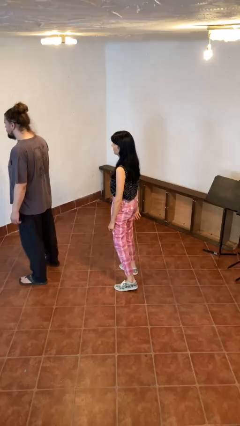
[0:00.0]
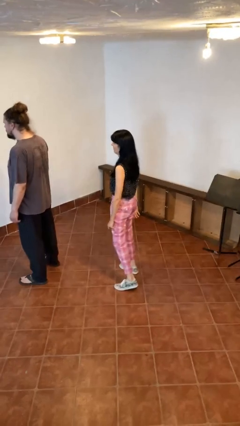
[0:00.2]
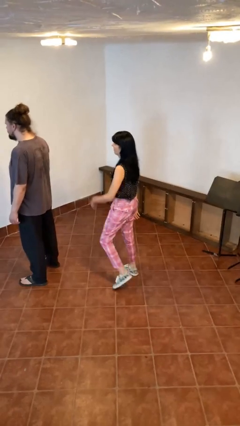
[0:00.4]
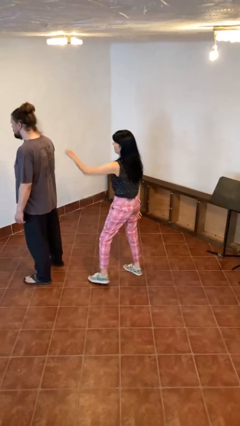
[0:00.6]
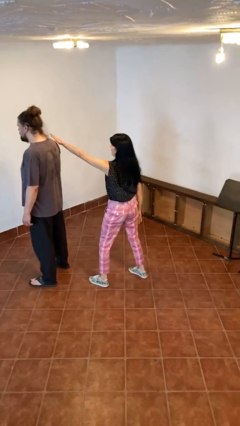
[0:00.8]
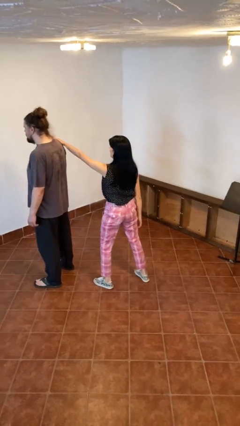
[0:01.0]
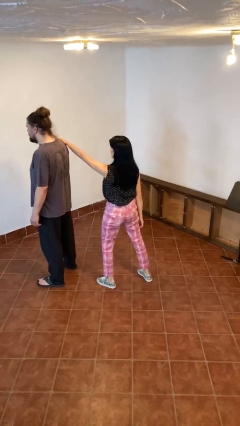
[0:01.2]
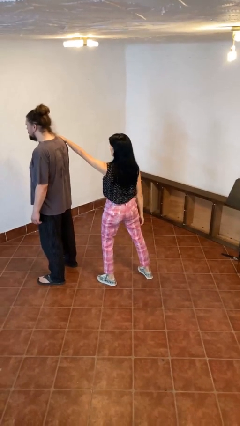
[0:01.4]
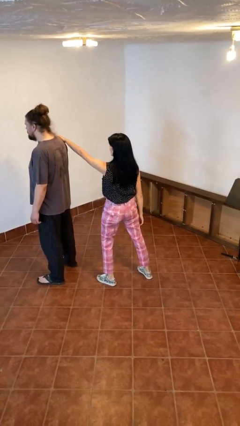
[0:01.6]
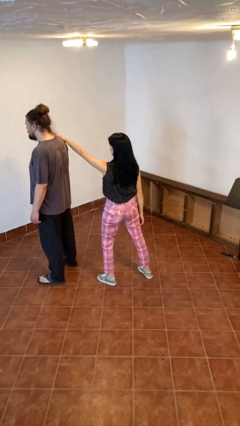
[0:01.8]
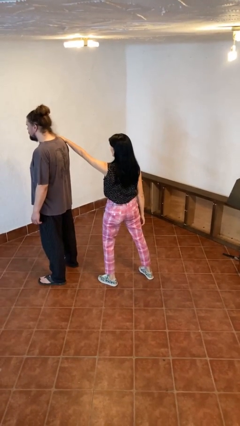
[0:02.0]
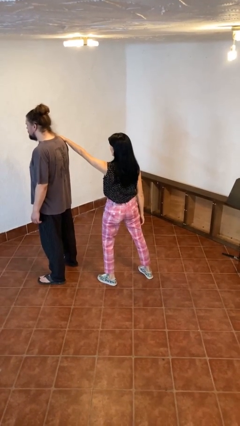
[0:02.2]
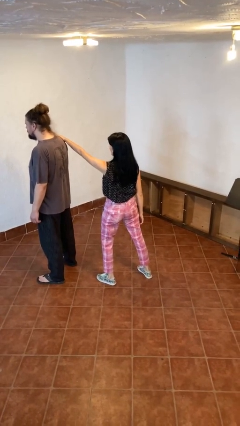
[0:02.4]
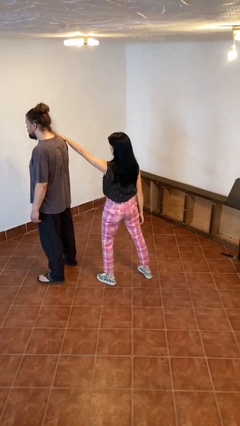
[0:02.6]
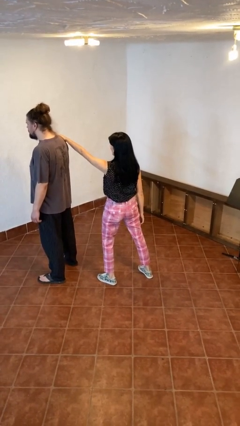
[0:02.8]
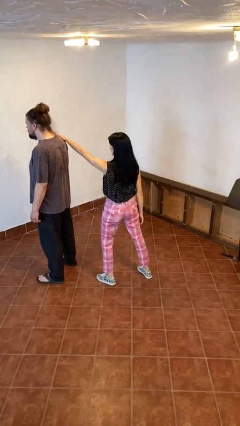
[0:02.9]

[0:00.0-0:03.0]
person grabs person by shoulder

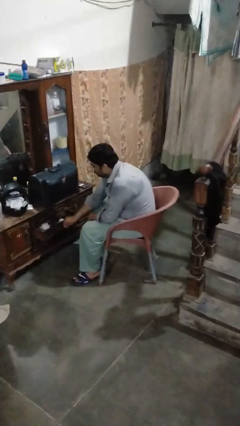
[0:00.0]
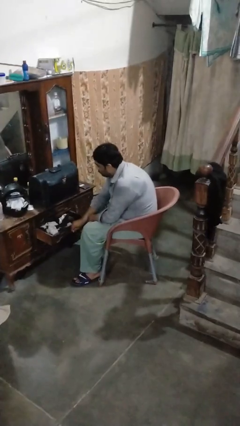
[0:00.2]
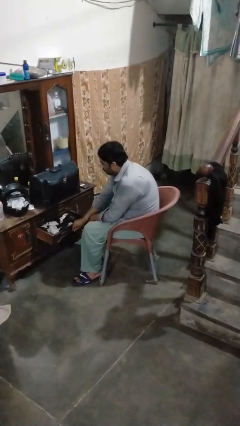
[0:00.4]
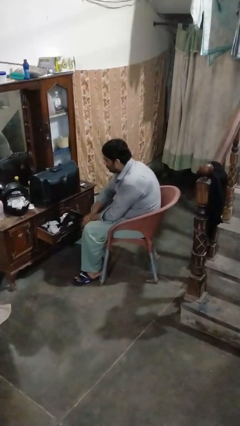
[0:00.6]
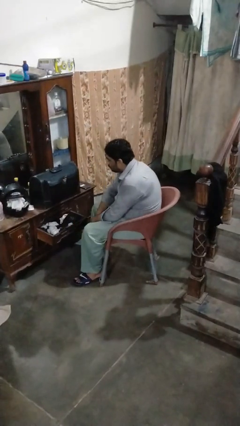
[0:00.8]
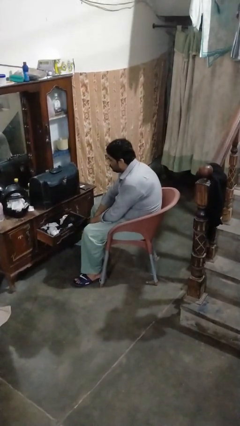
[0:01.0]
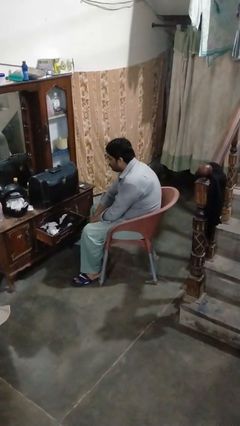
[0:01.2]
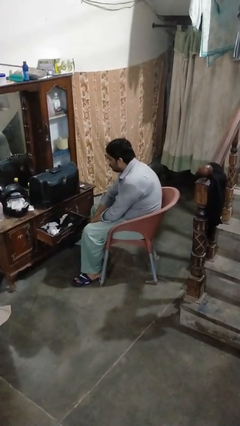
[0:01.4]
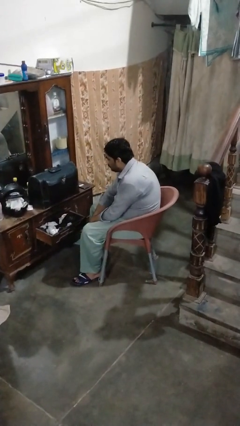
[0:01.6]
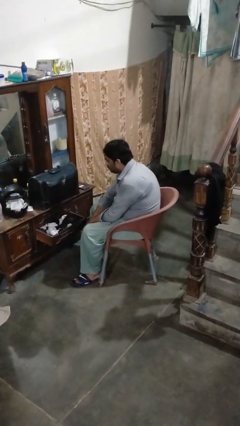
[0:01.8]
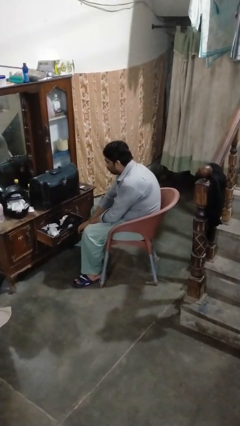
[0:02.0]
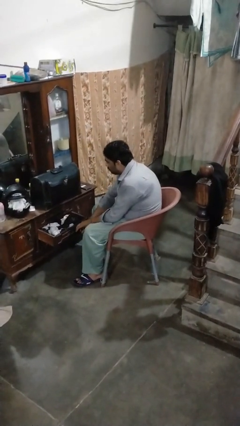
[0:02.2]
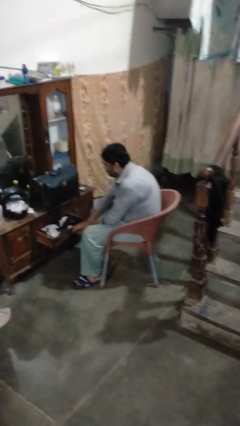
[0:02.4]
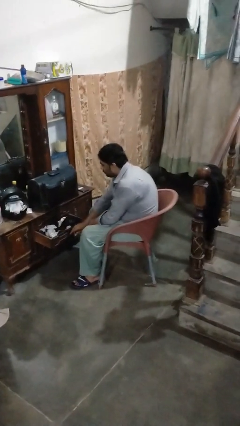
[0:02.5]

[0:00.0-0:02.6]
person opens dresser drawer

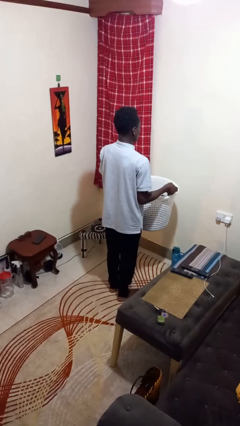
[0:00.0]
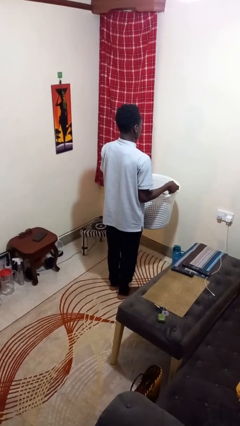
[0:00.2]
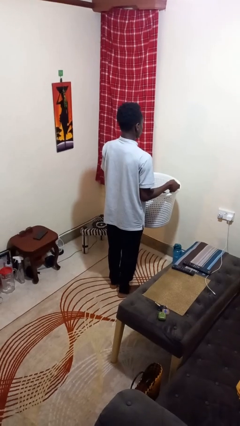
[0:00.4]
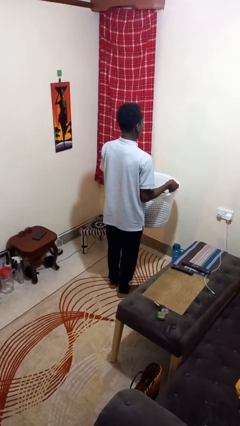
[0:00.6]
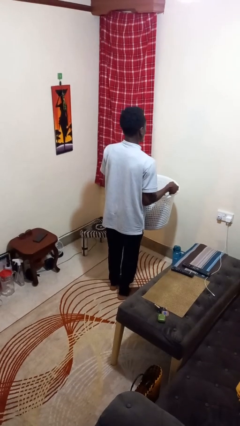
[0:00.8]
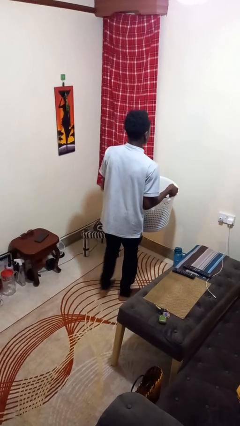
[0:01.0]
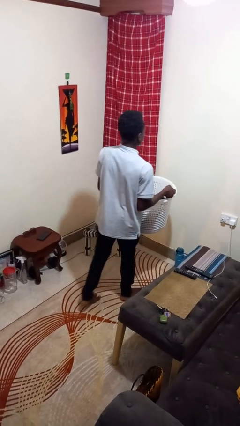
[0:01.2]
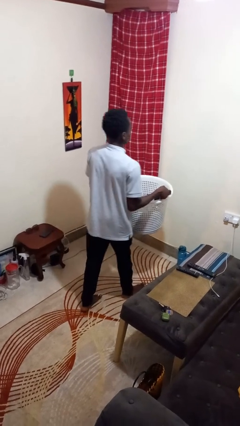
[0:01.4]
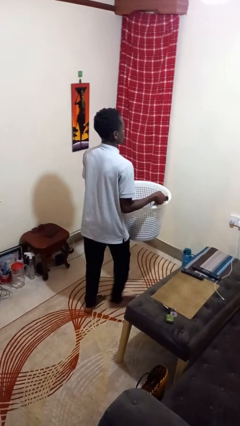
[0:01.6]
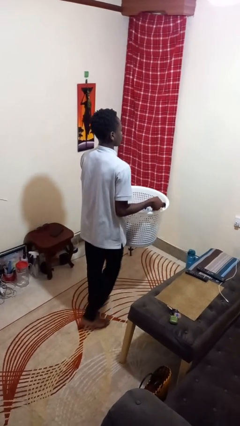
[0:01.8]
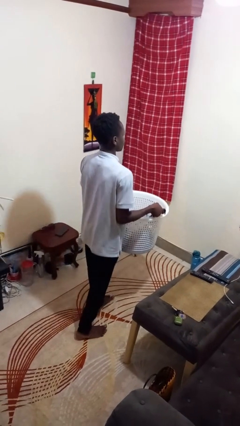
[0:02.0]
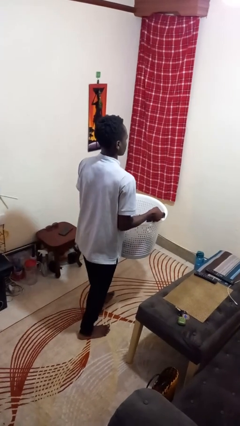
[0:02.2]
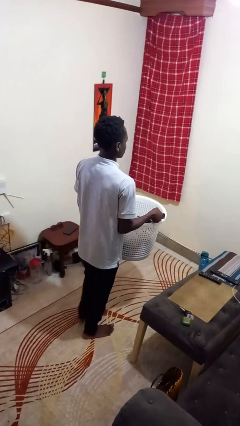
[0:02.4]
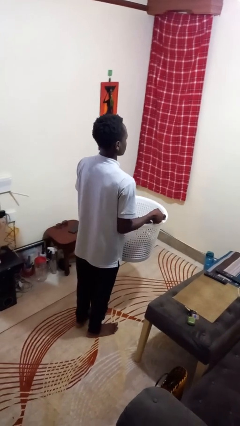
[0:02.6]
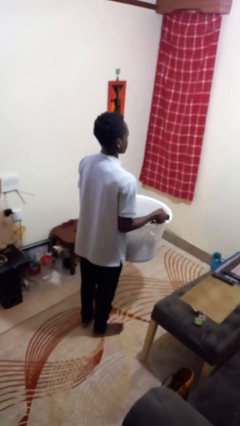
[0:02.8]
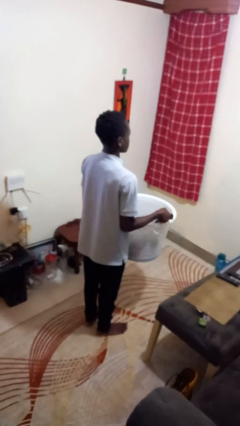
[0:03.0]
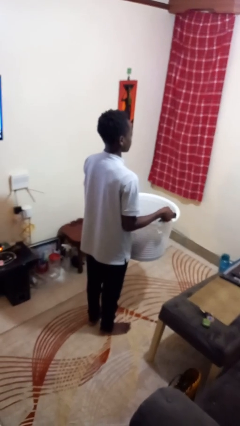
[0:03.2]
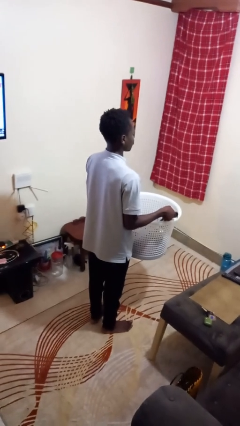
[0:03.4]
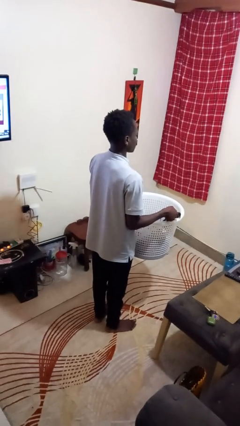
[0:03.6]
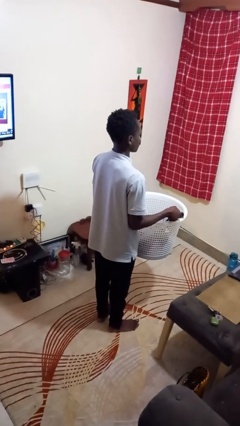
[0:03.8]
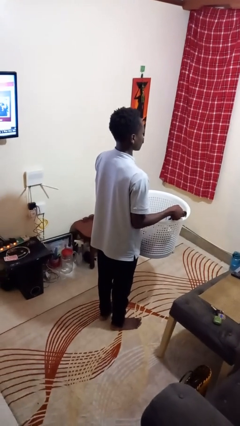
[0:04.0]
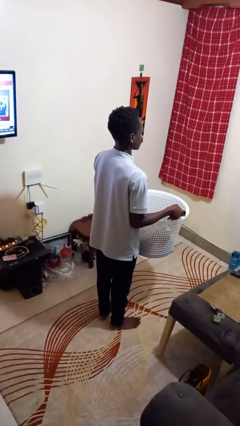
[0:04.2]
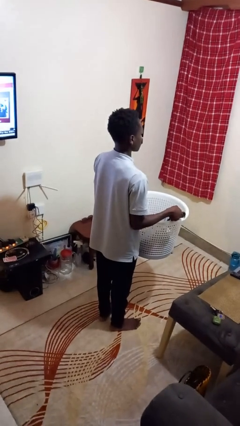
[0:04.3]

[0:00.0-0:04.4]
person carries laundry basket

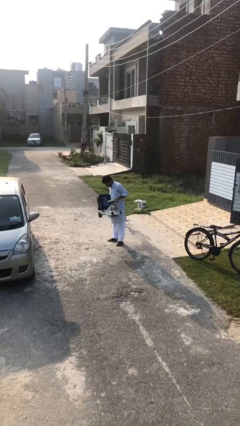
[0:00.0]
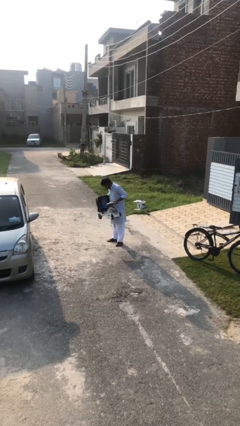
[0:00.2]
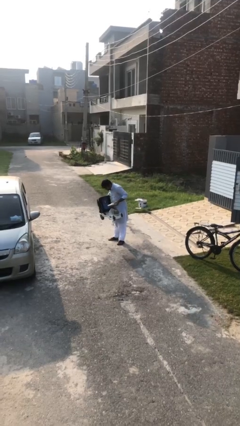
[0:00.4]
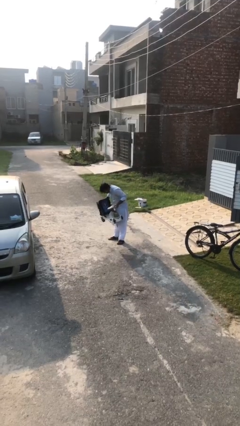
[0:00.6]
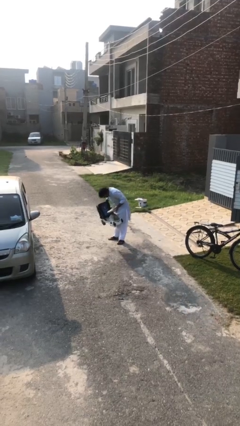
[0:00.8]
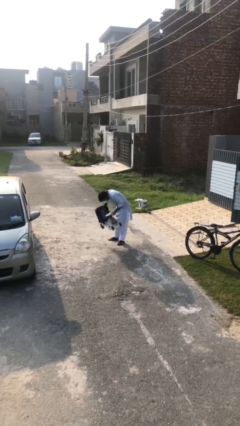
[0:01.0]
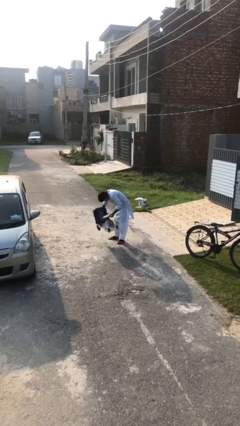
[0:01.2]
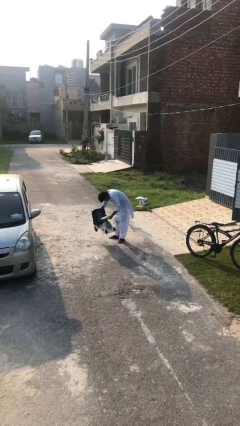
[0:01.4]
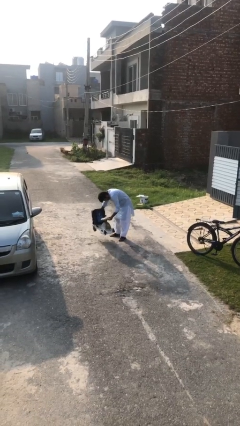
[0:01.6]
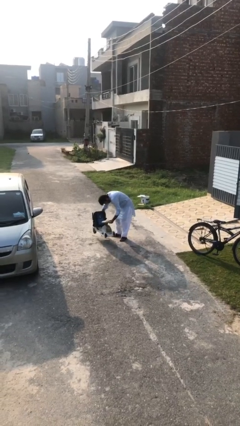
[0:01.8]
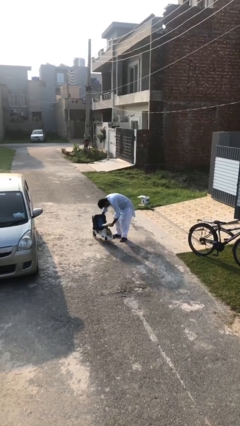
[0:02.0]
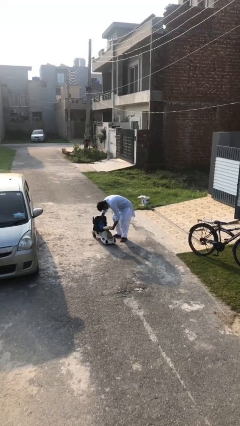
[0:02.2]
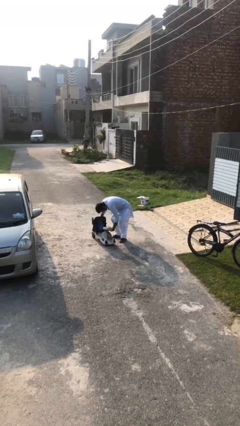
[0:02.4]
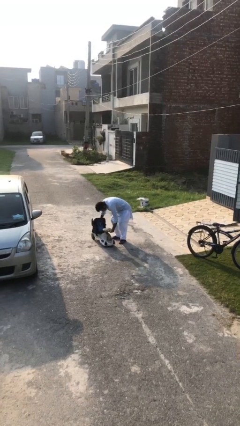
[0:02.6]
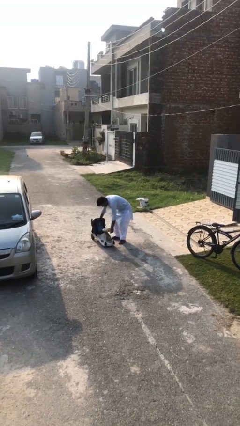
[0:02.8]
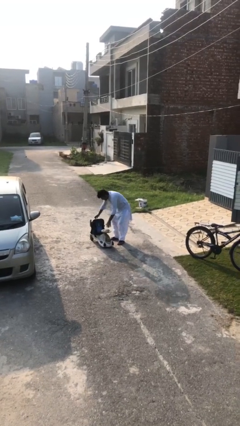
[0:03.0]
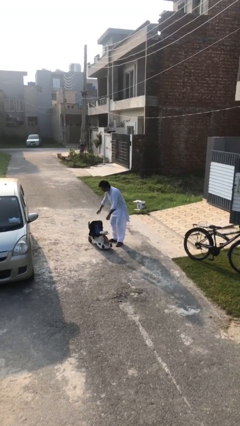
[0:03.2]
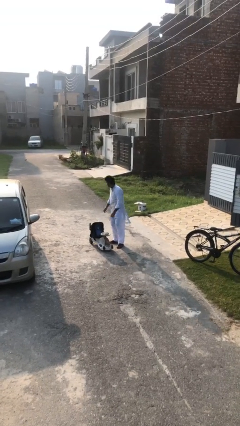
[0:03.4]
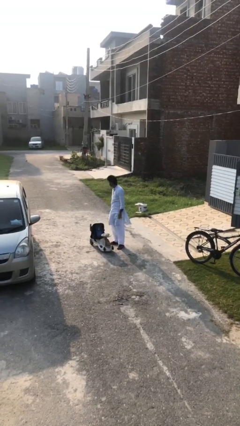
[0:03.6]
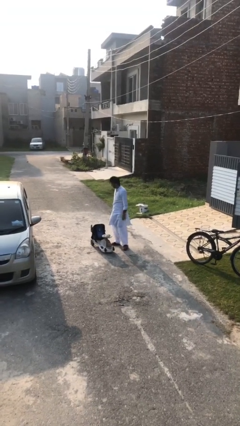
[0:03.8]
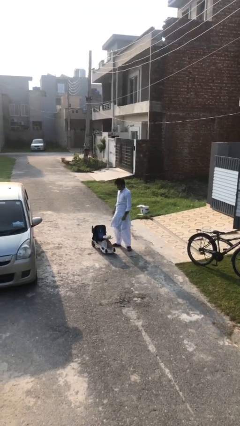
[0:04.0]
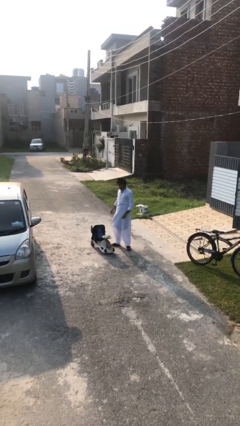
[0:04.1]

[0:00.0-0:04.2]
person puts down object on floor

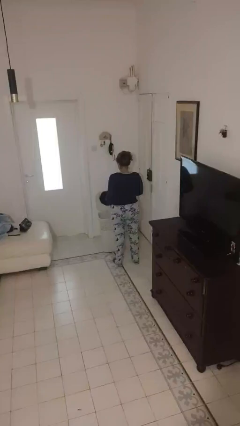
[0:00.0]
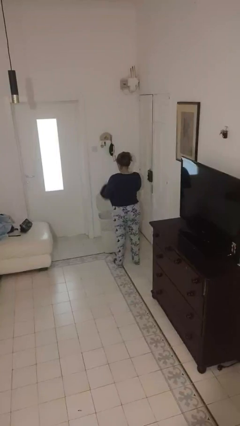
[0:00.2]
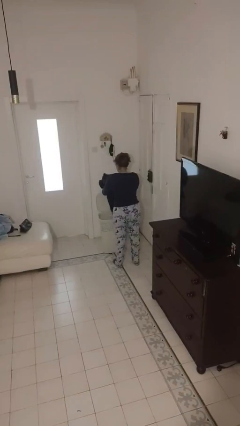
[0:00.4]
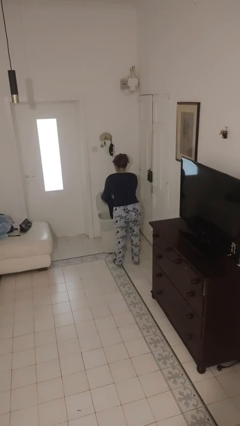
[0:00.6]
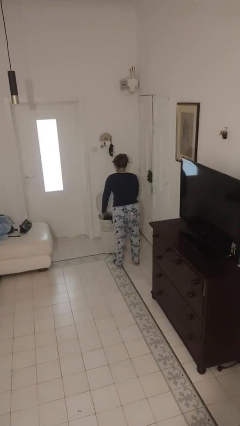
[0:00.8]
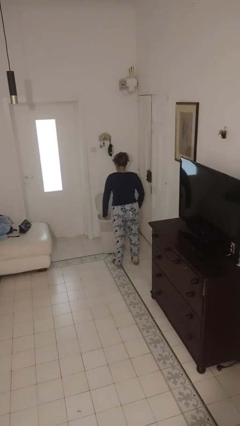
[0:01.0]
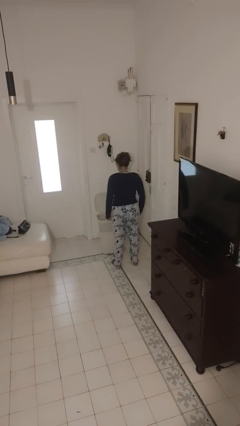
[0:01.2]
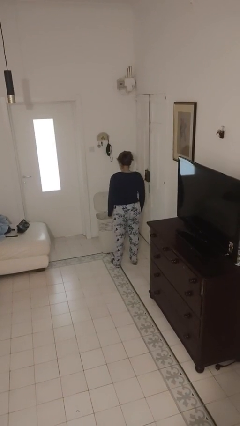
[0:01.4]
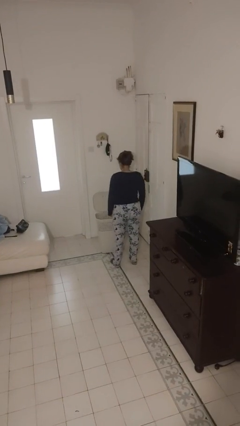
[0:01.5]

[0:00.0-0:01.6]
person puts object into basket

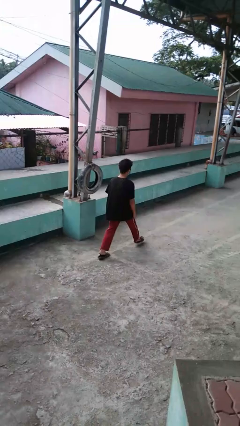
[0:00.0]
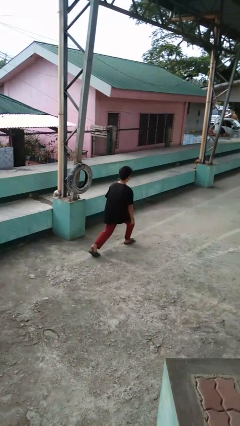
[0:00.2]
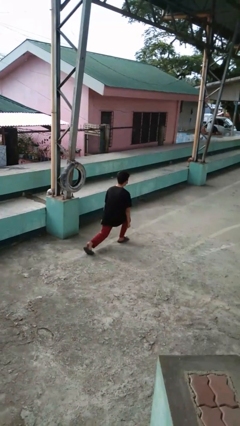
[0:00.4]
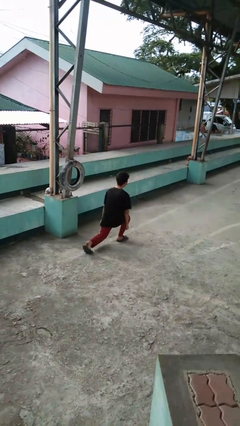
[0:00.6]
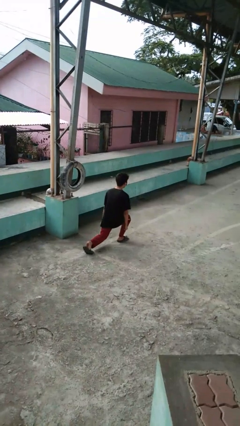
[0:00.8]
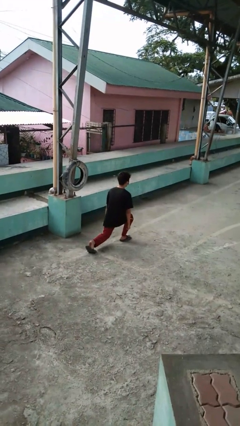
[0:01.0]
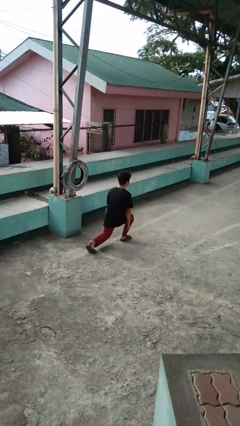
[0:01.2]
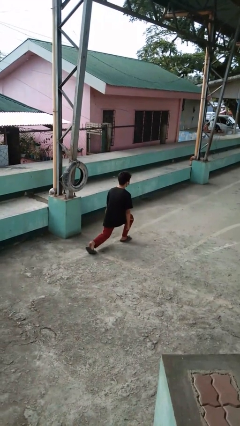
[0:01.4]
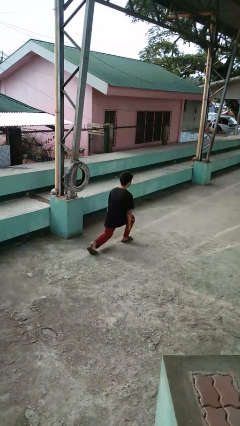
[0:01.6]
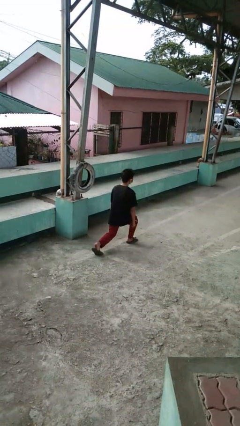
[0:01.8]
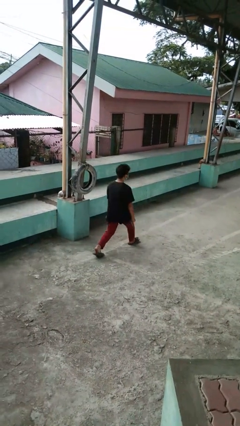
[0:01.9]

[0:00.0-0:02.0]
person exercises with lunges
